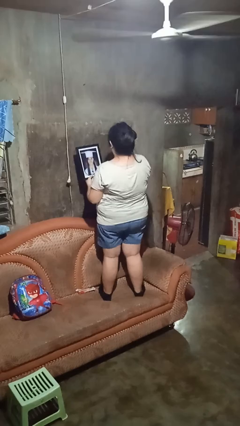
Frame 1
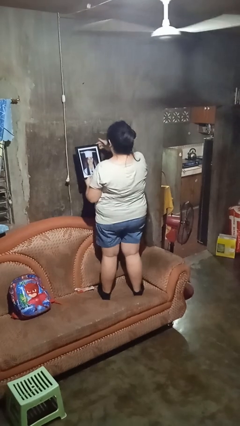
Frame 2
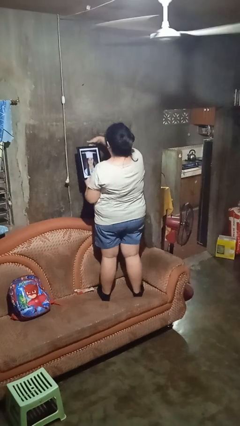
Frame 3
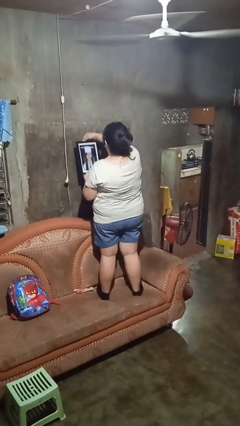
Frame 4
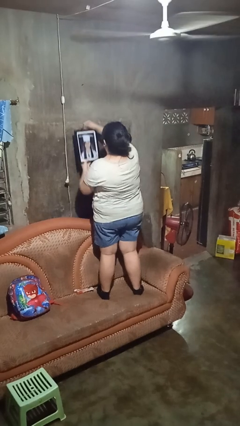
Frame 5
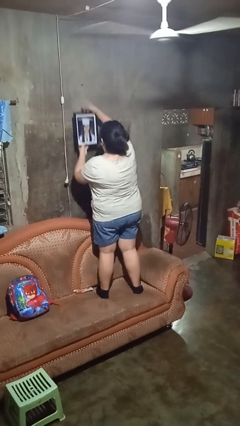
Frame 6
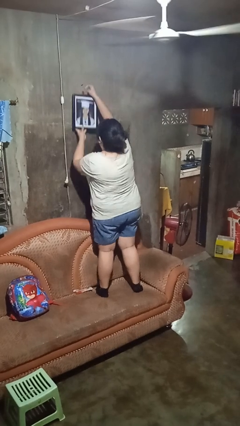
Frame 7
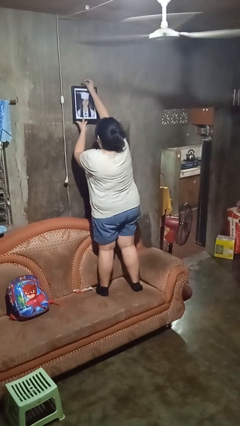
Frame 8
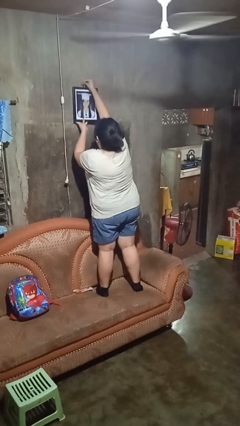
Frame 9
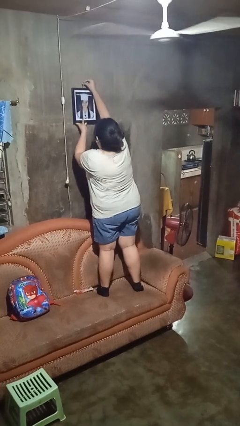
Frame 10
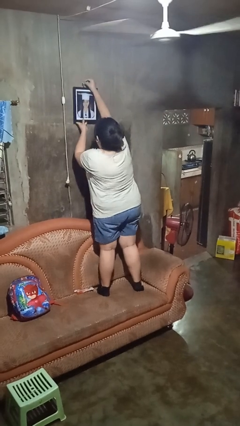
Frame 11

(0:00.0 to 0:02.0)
person puts up picture frame

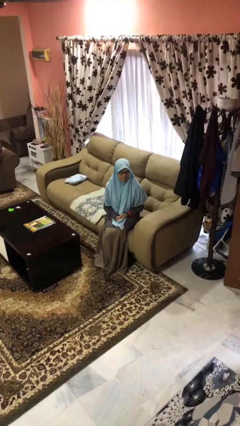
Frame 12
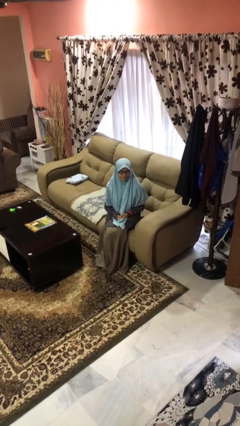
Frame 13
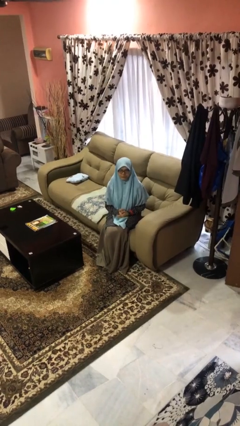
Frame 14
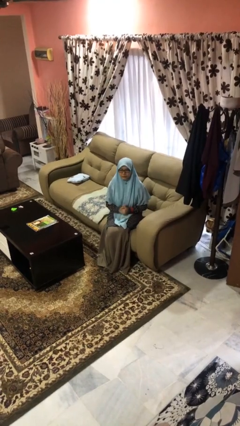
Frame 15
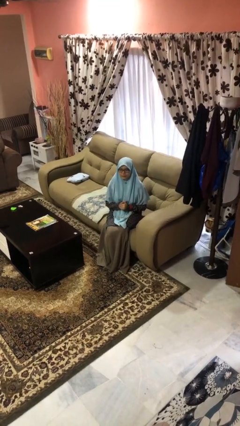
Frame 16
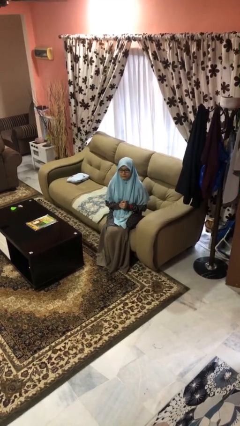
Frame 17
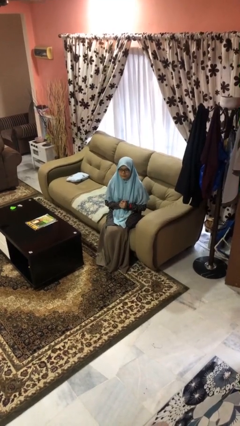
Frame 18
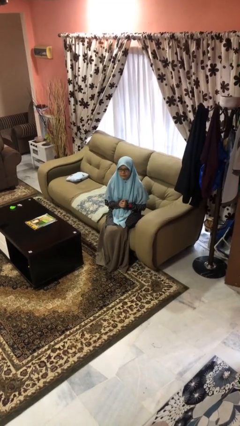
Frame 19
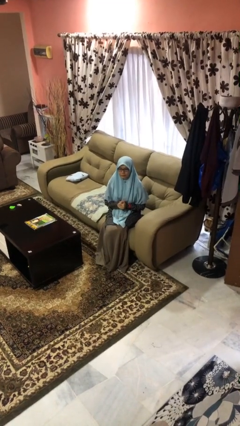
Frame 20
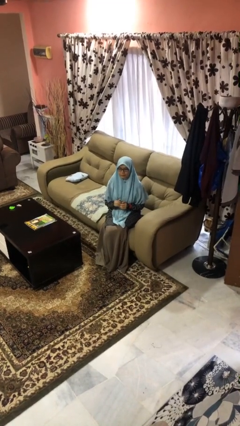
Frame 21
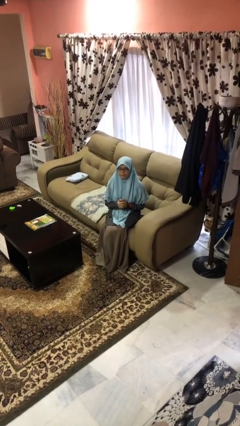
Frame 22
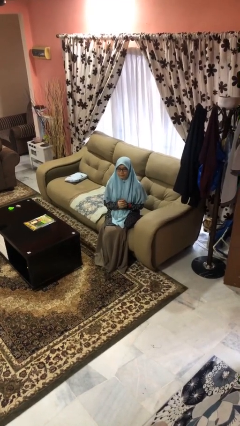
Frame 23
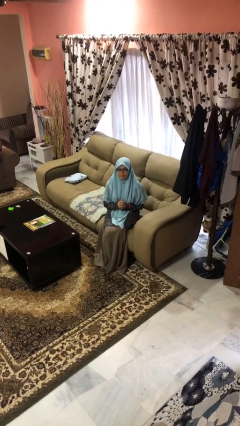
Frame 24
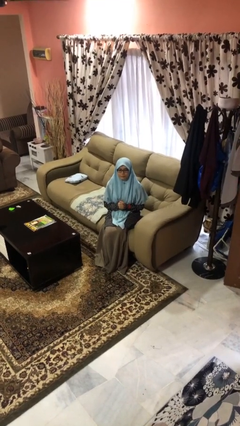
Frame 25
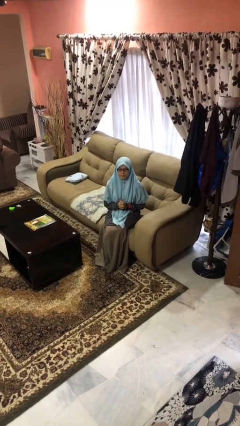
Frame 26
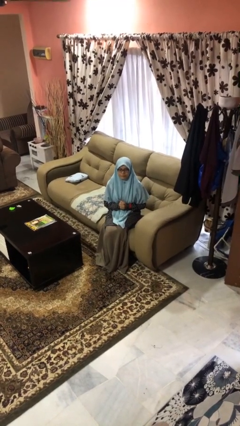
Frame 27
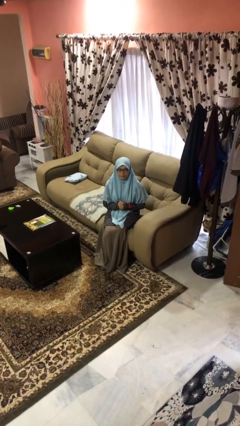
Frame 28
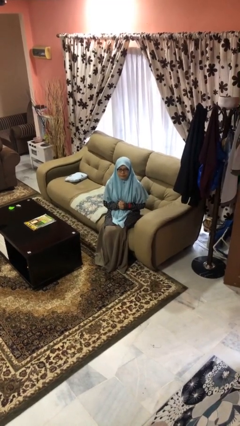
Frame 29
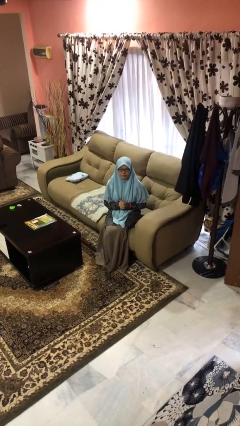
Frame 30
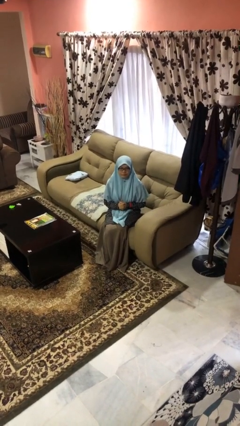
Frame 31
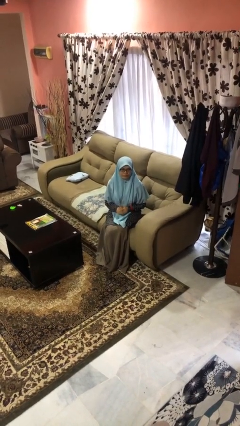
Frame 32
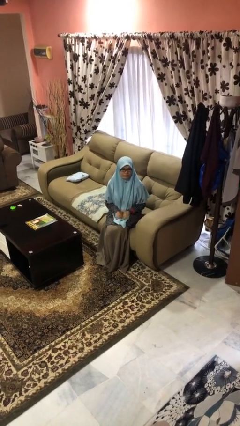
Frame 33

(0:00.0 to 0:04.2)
person cracks knuckles

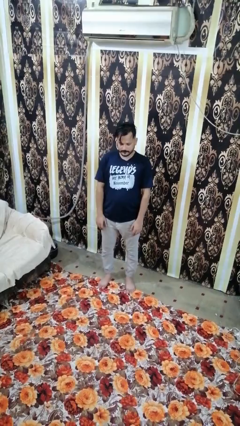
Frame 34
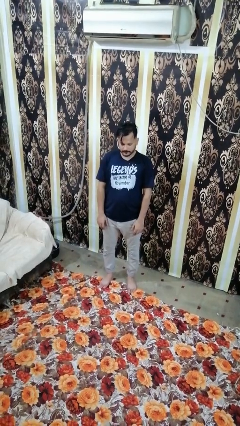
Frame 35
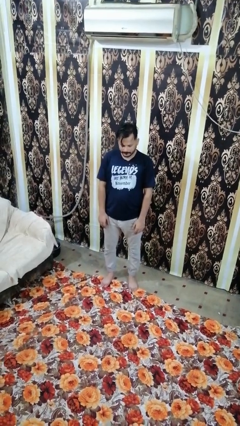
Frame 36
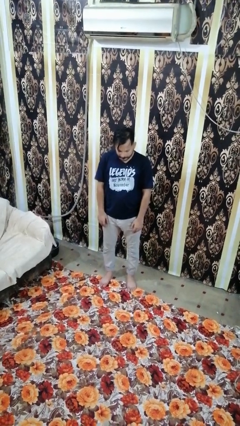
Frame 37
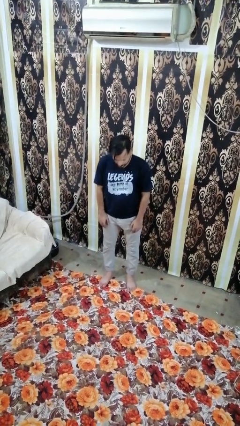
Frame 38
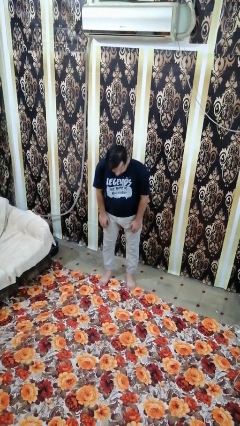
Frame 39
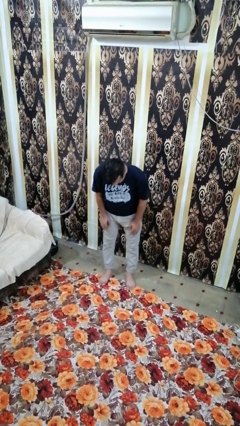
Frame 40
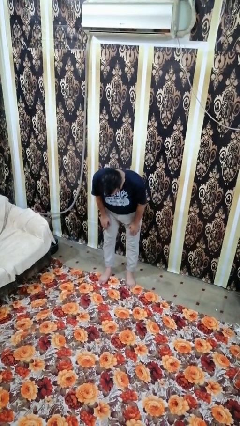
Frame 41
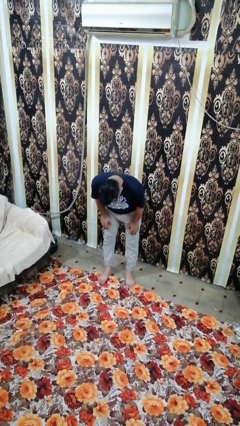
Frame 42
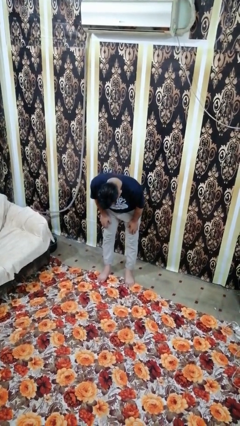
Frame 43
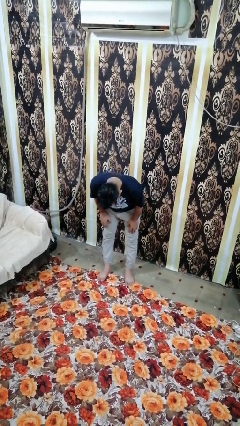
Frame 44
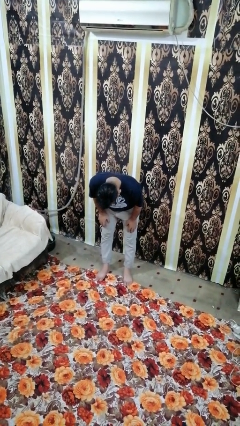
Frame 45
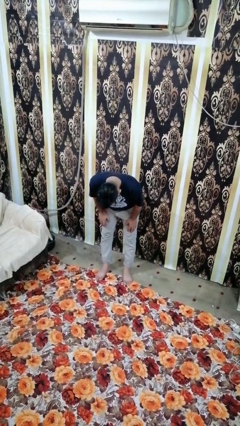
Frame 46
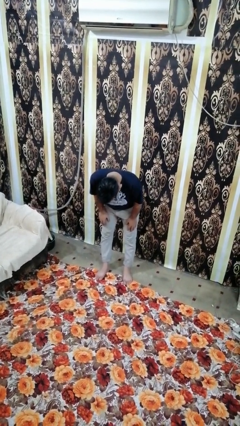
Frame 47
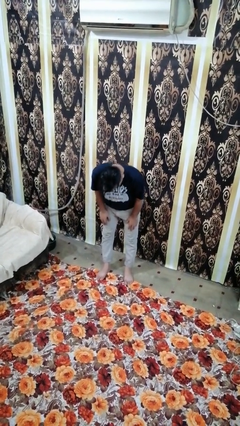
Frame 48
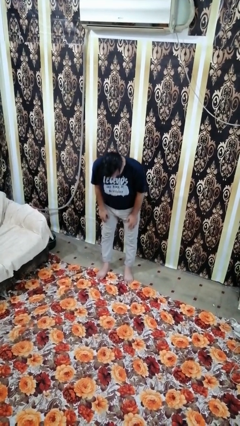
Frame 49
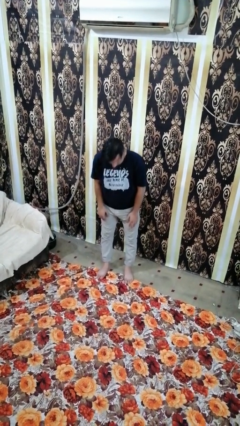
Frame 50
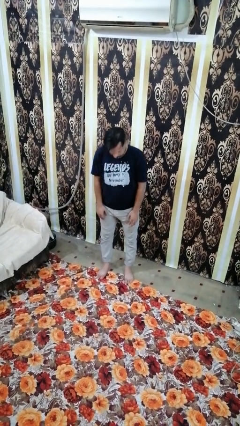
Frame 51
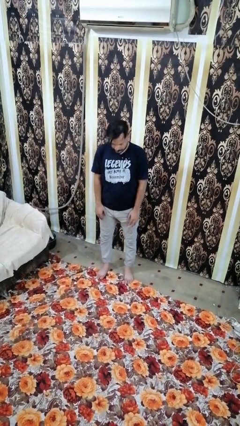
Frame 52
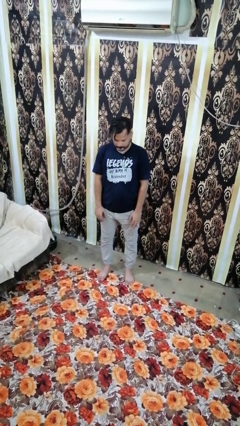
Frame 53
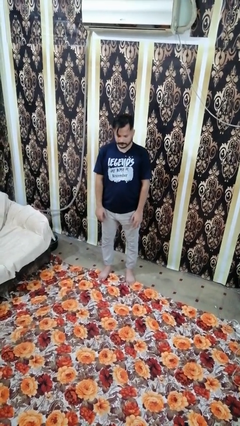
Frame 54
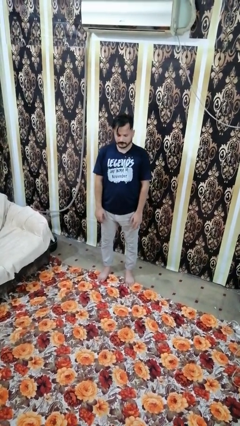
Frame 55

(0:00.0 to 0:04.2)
person bows

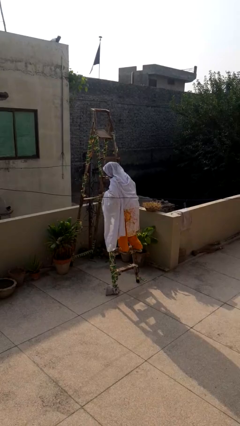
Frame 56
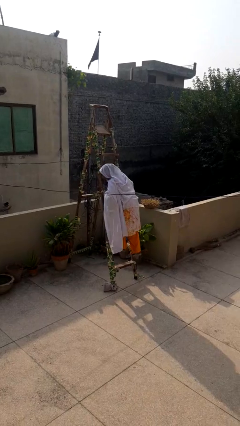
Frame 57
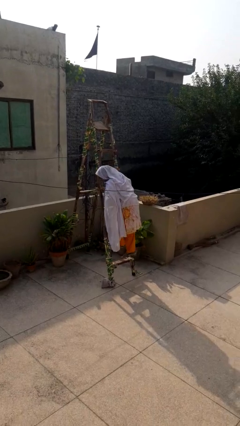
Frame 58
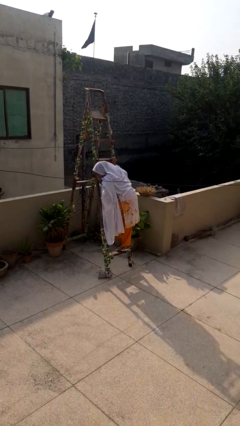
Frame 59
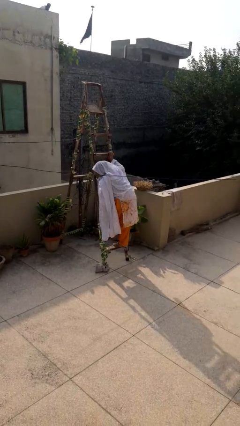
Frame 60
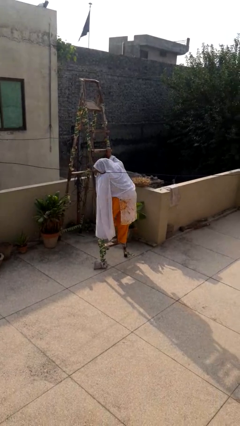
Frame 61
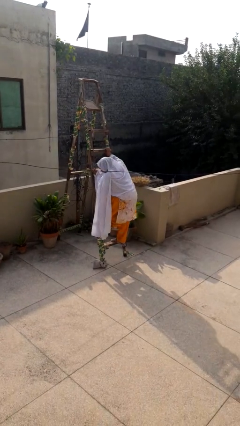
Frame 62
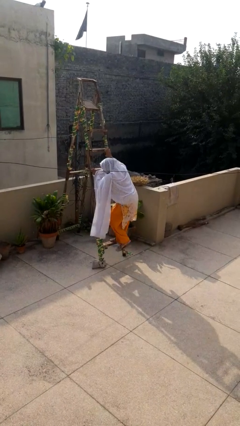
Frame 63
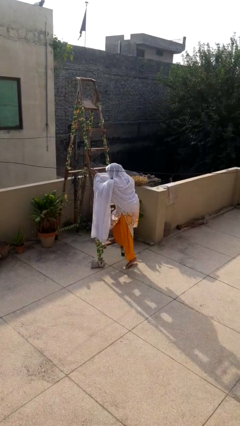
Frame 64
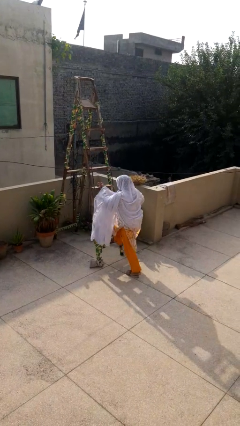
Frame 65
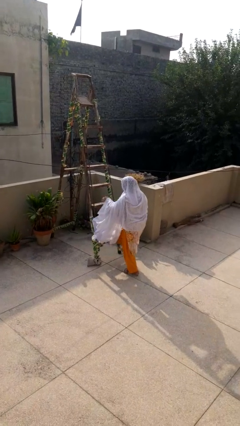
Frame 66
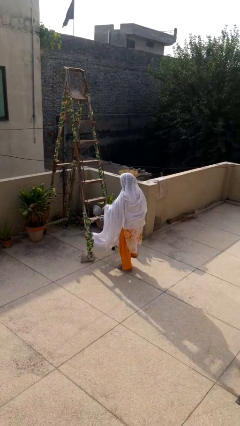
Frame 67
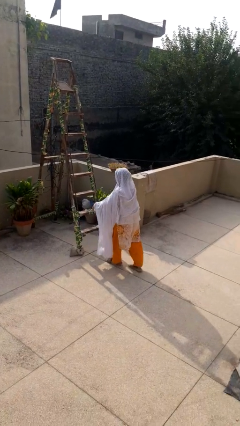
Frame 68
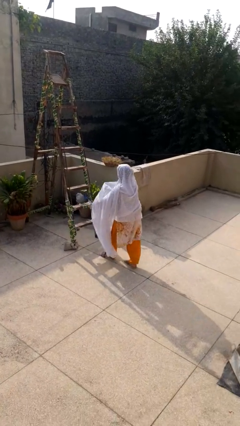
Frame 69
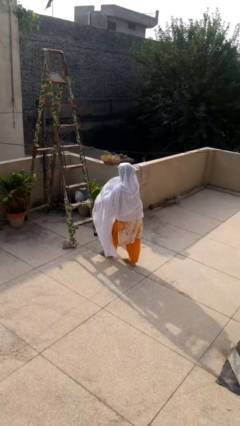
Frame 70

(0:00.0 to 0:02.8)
person climbs down ladder

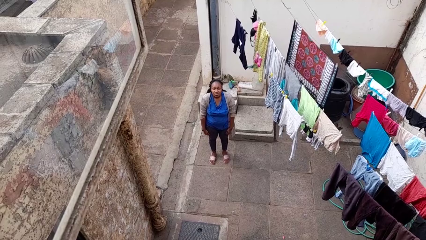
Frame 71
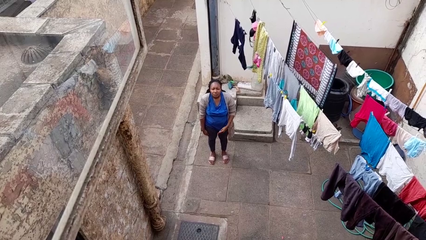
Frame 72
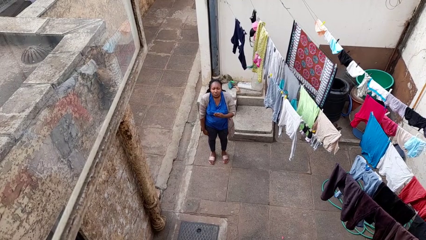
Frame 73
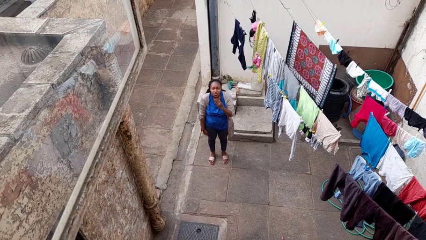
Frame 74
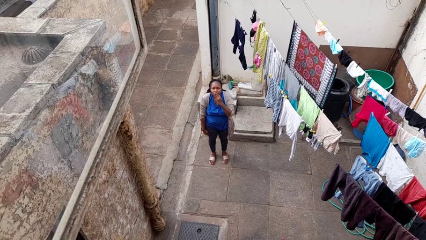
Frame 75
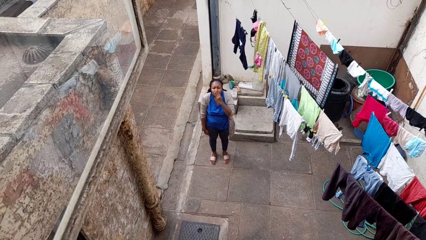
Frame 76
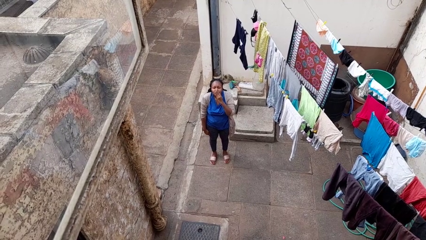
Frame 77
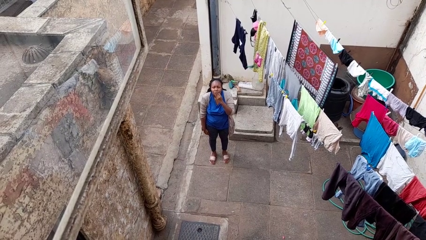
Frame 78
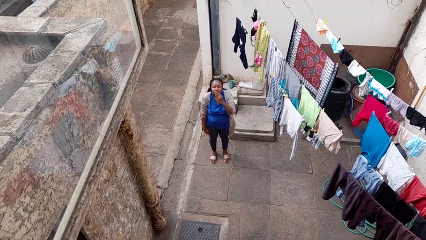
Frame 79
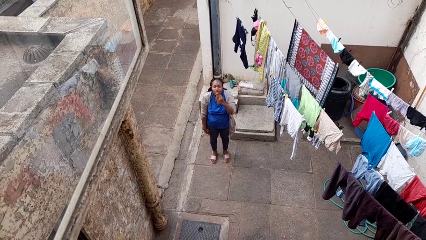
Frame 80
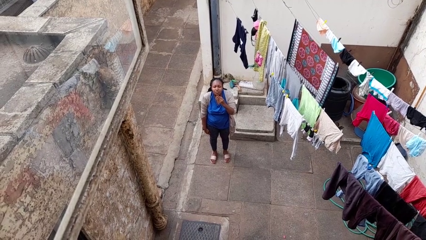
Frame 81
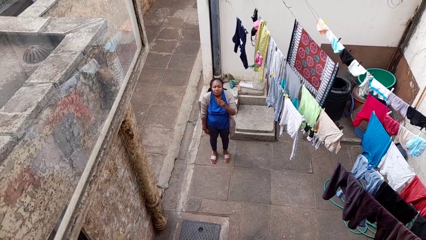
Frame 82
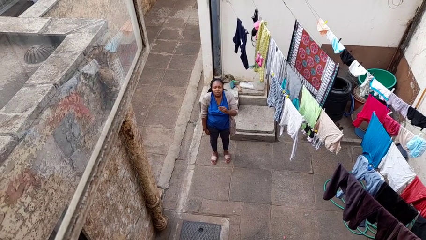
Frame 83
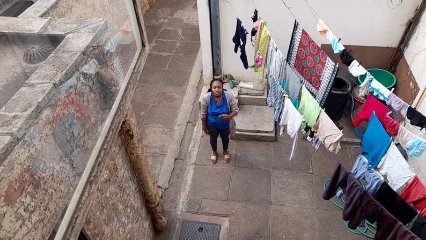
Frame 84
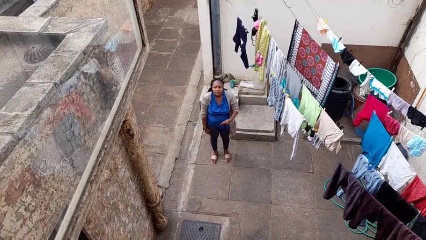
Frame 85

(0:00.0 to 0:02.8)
person gestures blow kiss

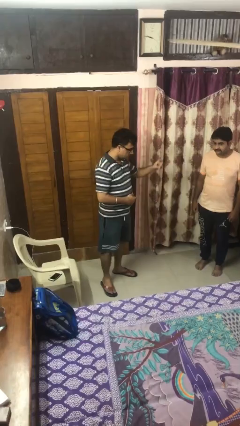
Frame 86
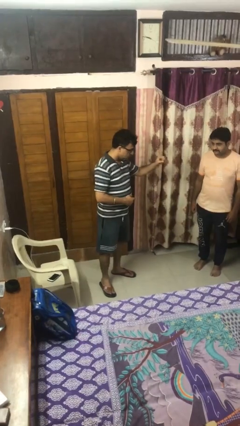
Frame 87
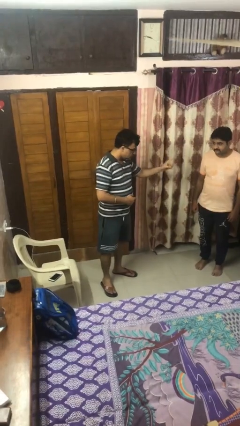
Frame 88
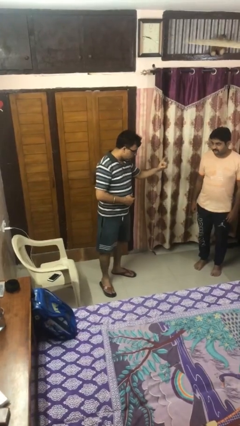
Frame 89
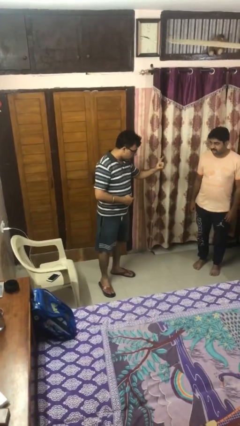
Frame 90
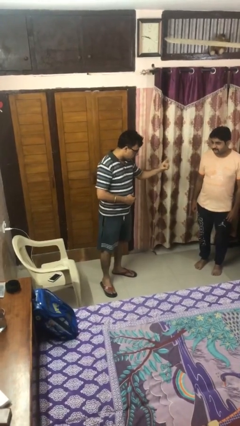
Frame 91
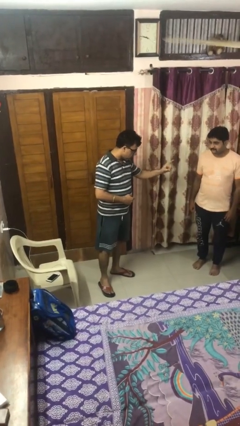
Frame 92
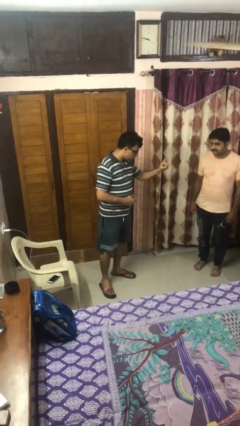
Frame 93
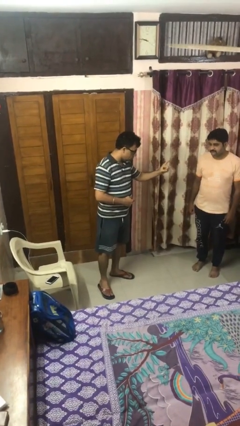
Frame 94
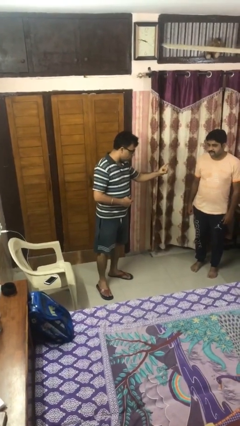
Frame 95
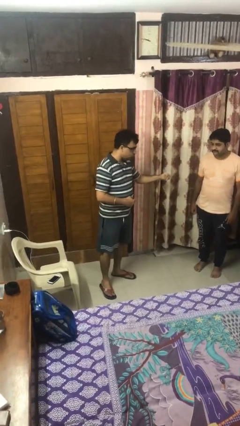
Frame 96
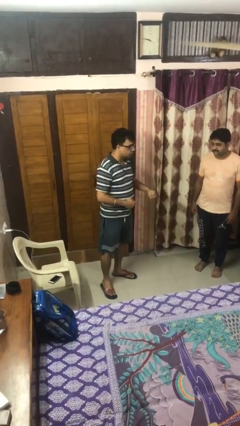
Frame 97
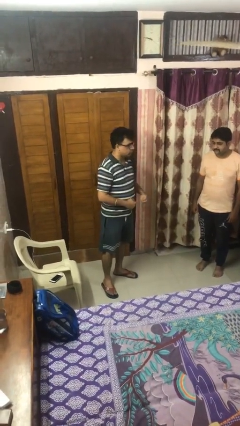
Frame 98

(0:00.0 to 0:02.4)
person points at person
